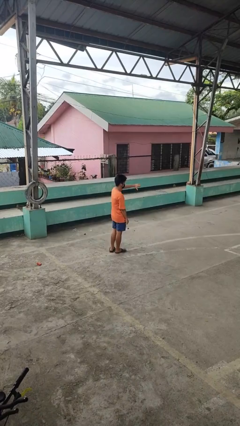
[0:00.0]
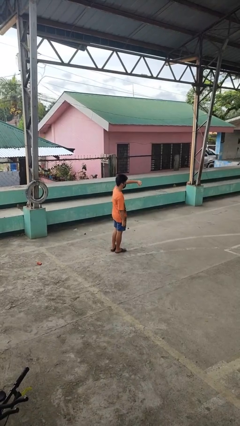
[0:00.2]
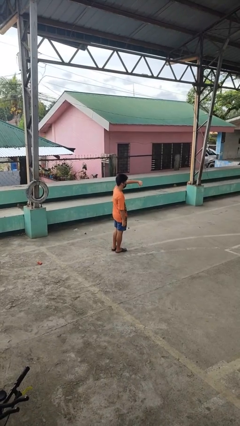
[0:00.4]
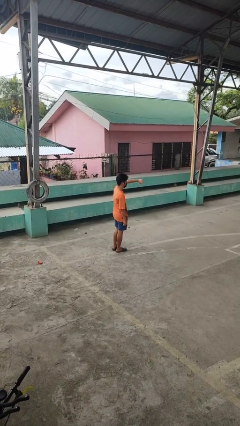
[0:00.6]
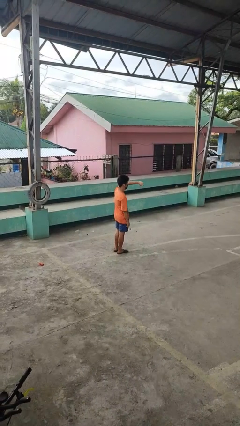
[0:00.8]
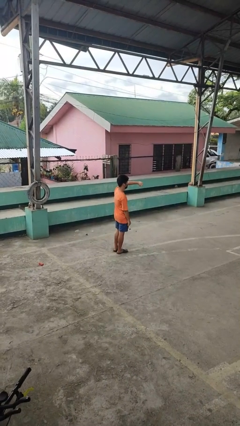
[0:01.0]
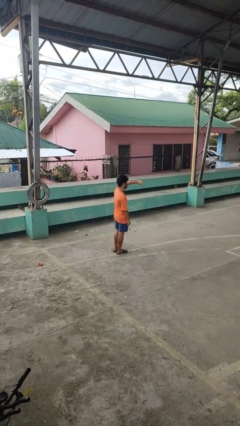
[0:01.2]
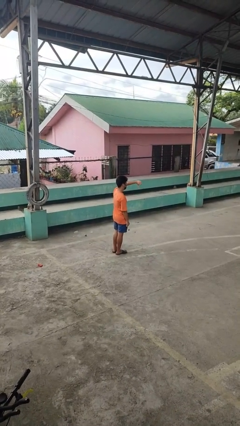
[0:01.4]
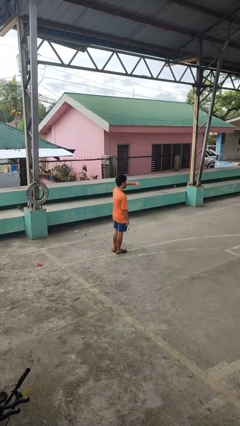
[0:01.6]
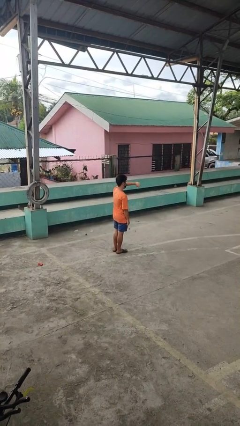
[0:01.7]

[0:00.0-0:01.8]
person gestures thumbs down

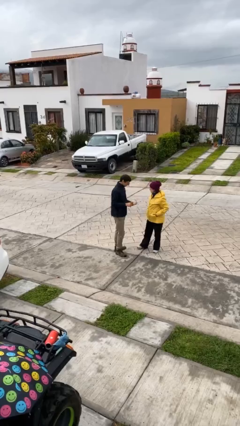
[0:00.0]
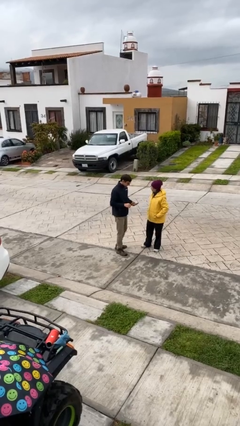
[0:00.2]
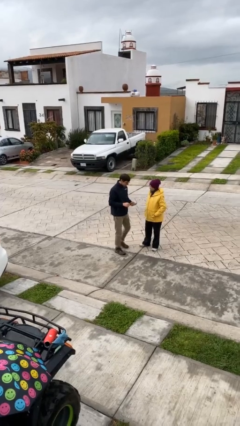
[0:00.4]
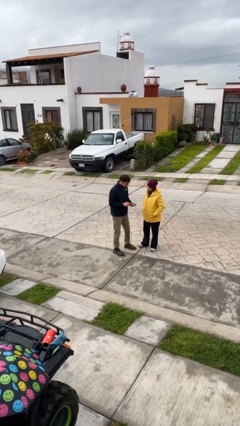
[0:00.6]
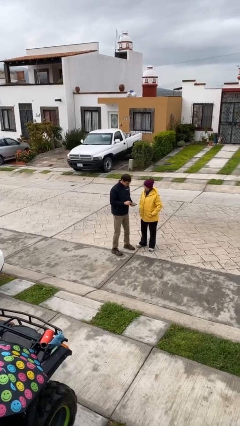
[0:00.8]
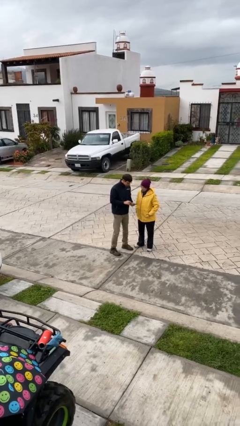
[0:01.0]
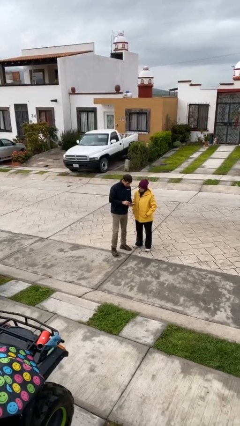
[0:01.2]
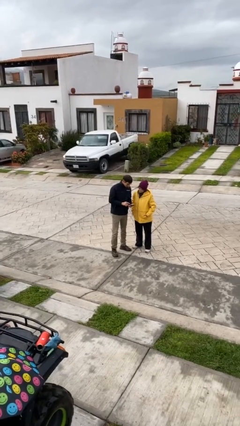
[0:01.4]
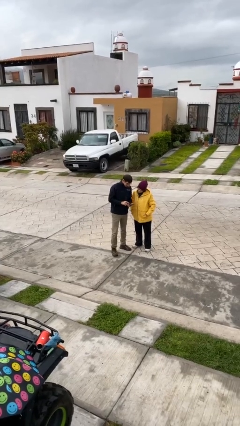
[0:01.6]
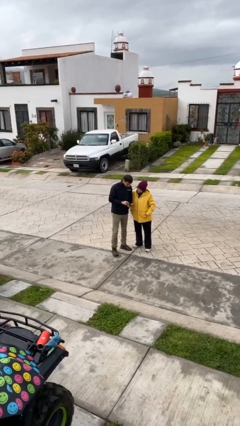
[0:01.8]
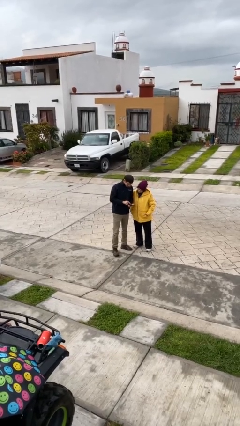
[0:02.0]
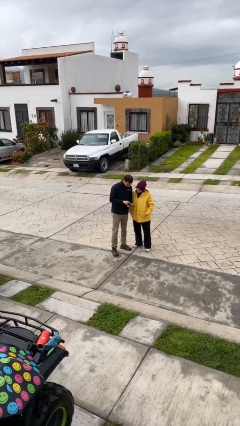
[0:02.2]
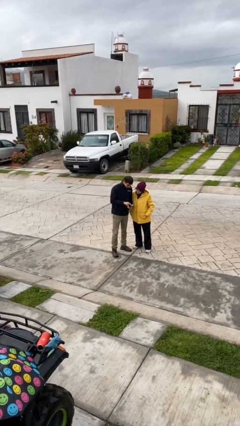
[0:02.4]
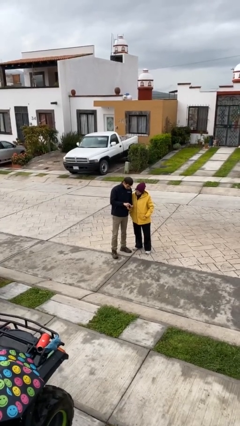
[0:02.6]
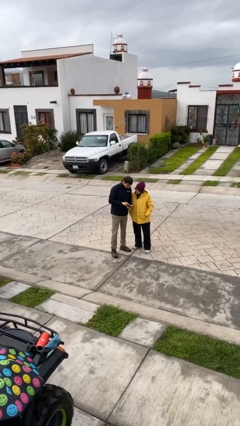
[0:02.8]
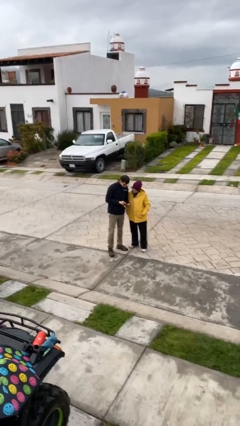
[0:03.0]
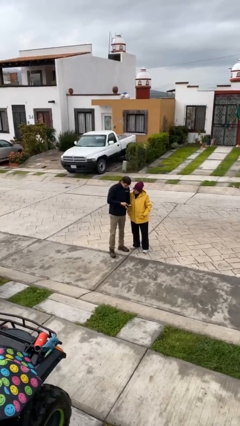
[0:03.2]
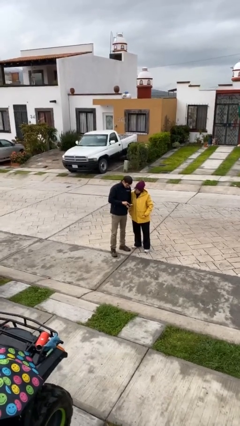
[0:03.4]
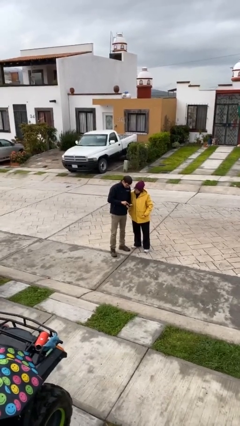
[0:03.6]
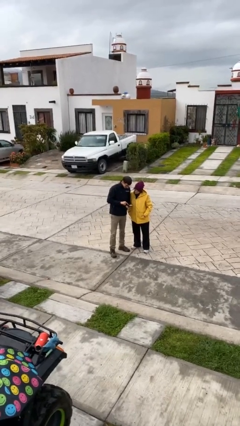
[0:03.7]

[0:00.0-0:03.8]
person talks to person

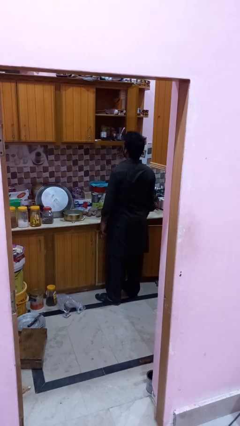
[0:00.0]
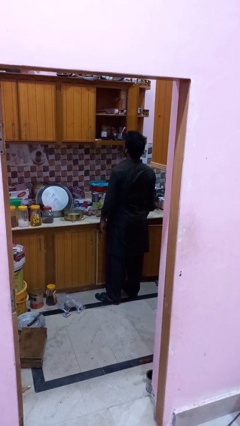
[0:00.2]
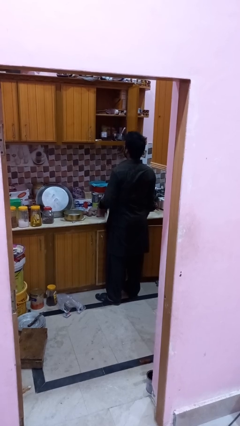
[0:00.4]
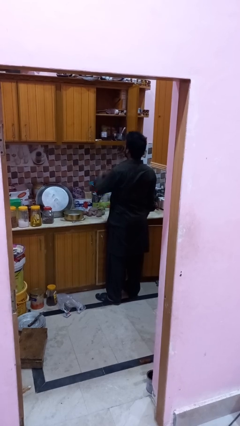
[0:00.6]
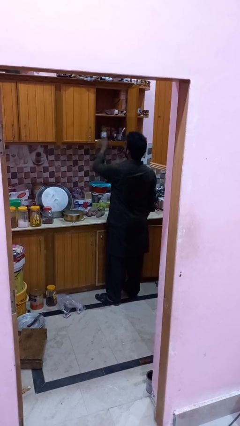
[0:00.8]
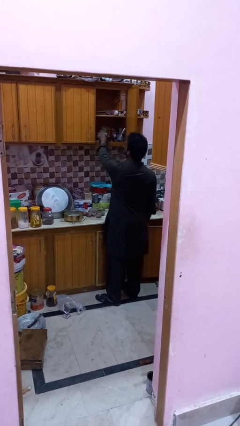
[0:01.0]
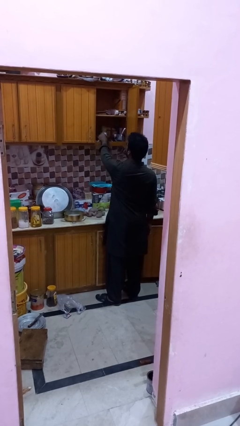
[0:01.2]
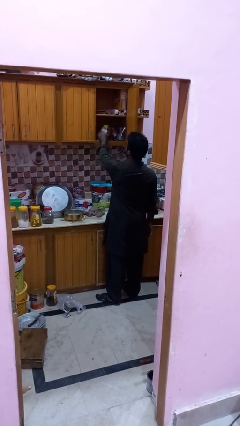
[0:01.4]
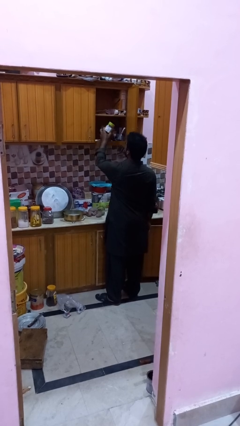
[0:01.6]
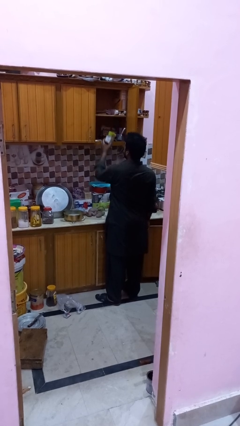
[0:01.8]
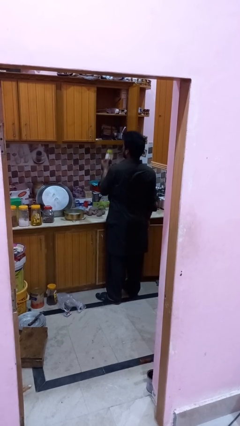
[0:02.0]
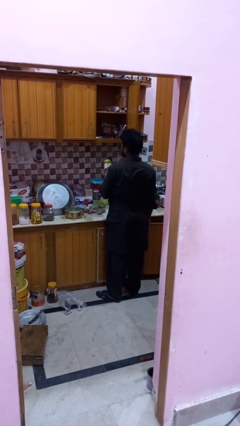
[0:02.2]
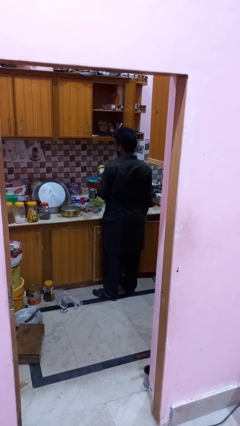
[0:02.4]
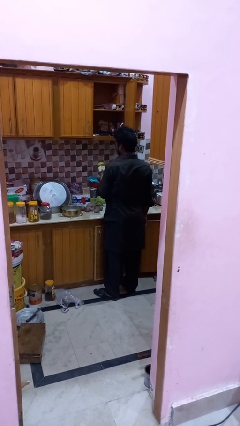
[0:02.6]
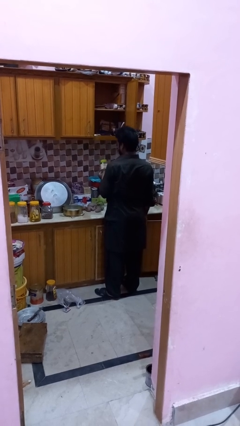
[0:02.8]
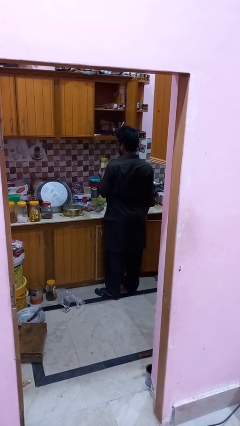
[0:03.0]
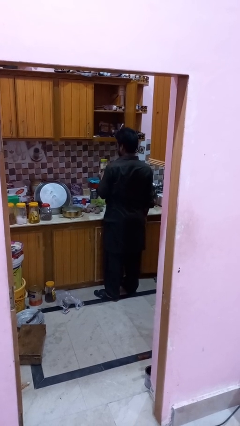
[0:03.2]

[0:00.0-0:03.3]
person takes object from cabinet

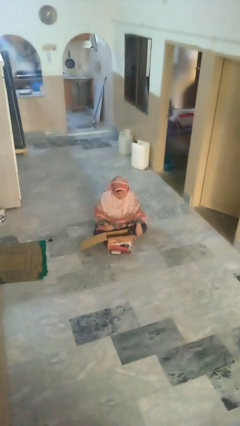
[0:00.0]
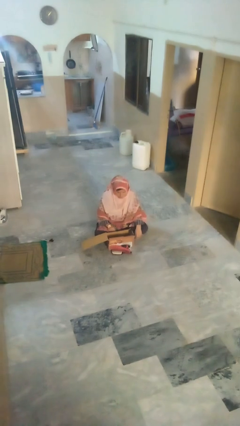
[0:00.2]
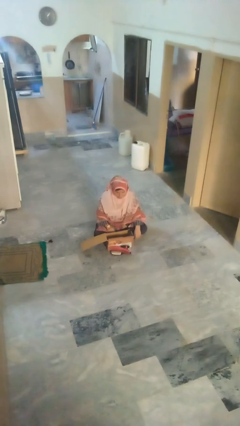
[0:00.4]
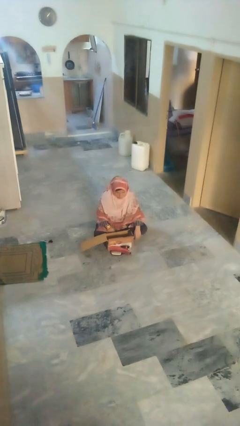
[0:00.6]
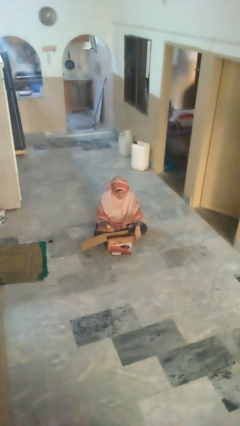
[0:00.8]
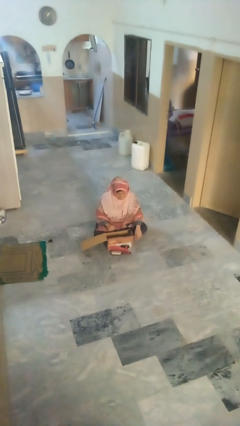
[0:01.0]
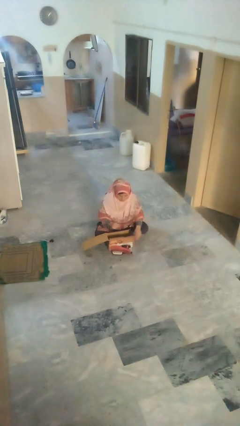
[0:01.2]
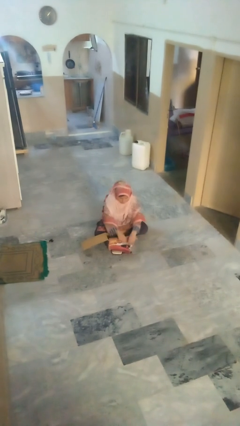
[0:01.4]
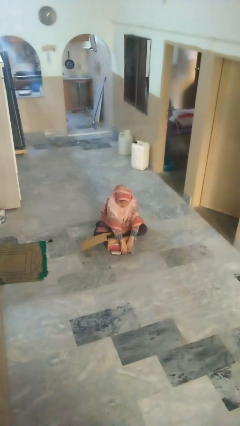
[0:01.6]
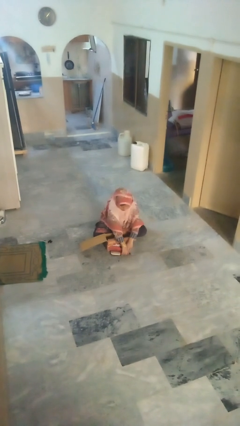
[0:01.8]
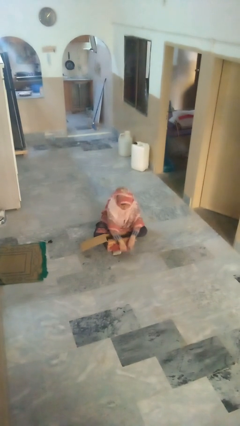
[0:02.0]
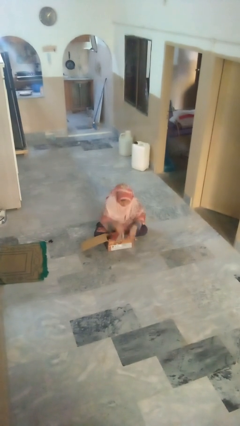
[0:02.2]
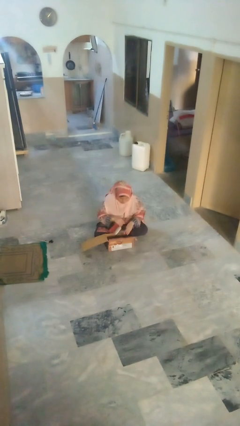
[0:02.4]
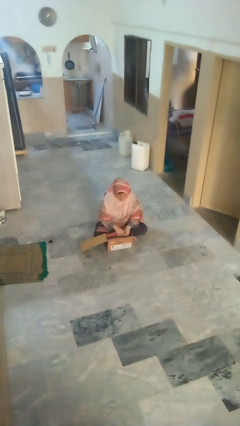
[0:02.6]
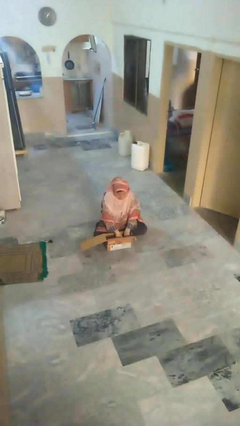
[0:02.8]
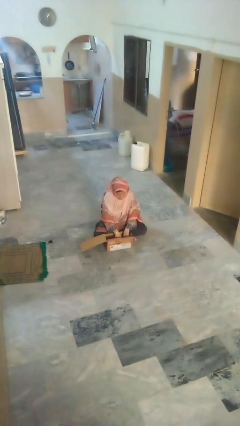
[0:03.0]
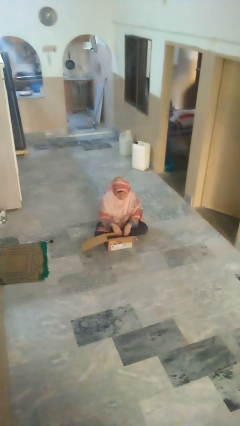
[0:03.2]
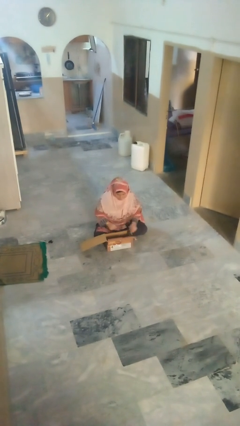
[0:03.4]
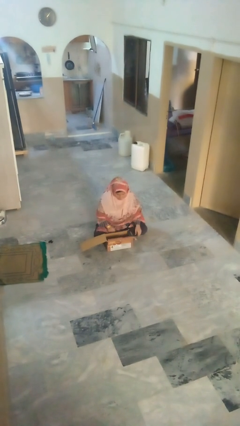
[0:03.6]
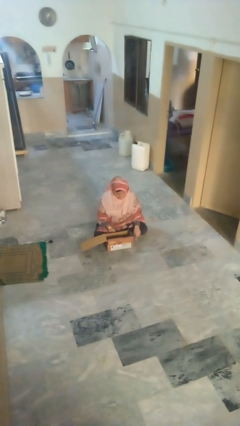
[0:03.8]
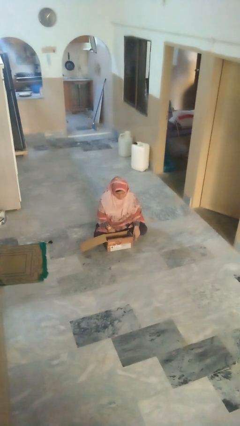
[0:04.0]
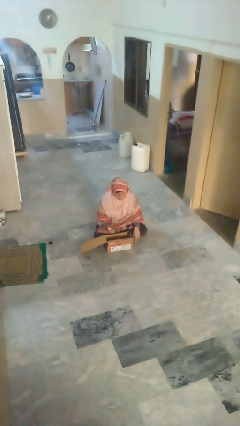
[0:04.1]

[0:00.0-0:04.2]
person puts object into box

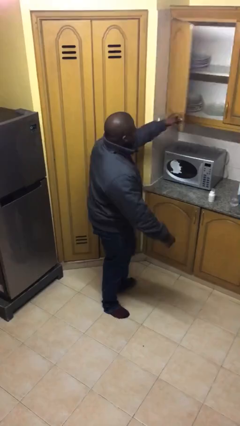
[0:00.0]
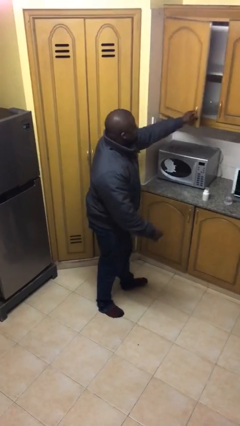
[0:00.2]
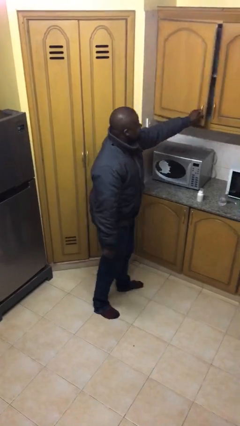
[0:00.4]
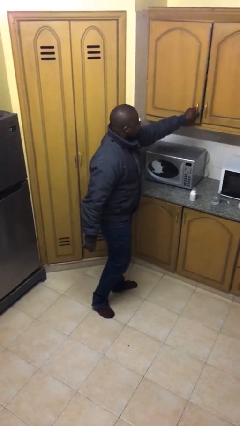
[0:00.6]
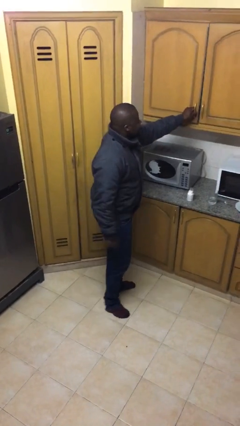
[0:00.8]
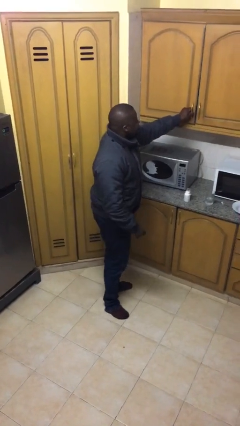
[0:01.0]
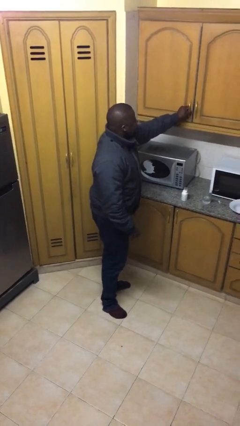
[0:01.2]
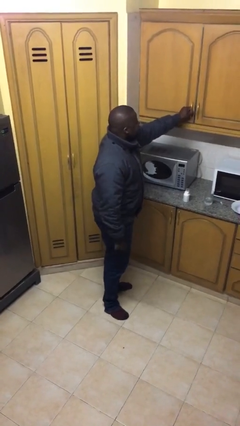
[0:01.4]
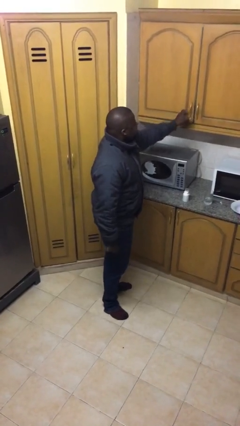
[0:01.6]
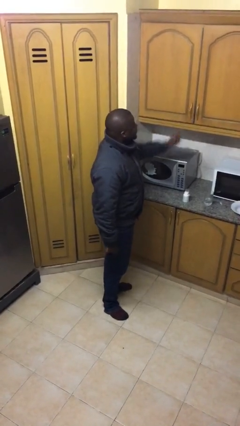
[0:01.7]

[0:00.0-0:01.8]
person closes cabinet

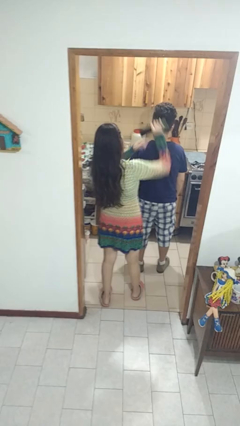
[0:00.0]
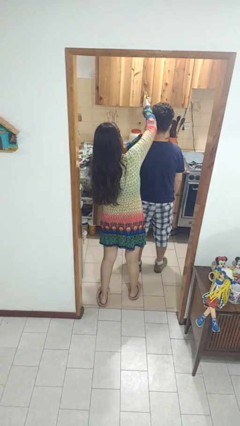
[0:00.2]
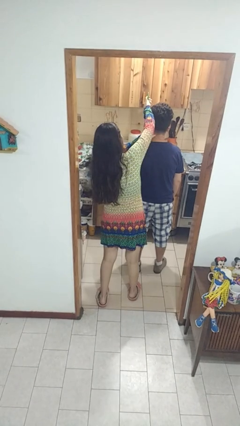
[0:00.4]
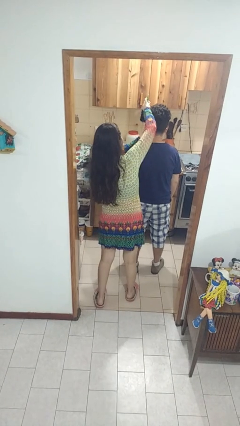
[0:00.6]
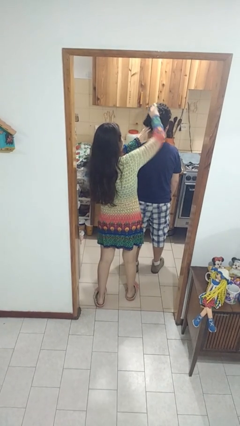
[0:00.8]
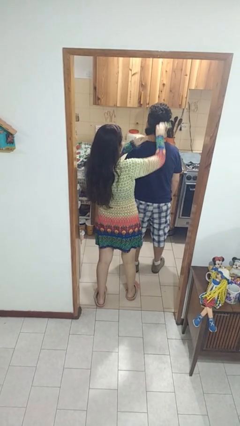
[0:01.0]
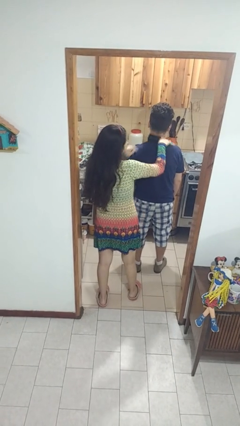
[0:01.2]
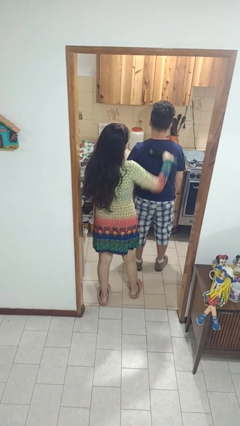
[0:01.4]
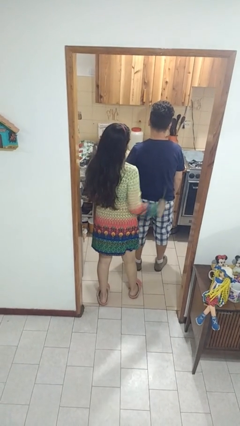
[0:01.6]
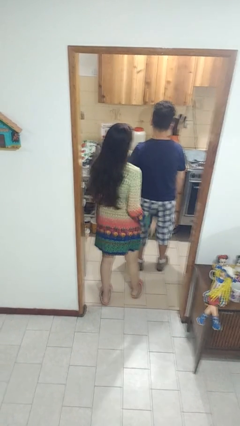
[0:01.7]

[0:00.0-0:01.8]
person brushes hair of person

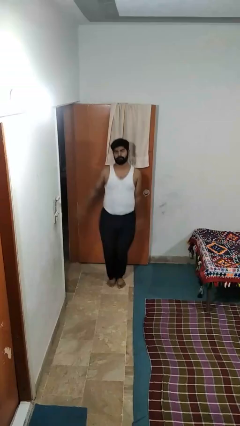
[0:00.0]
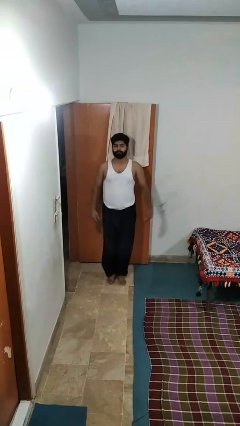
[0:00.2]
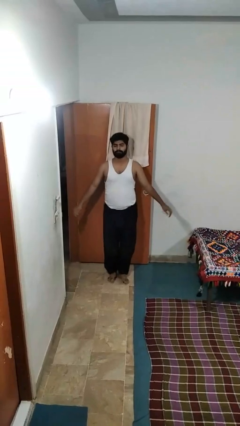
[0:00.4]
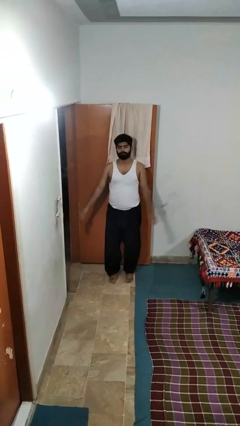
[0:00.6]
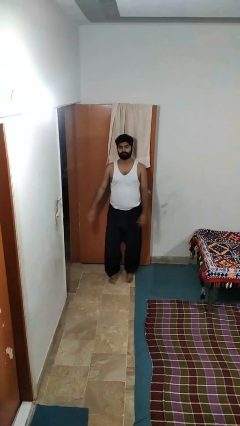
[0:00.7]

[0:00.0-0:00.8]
person exercises with jumping jacks
